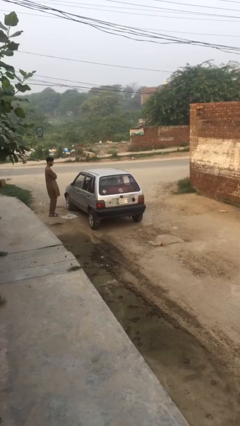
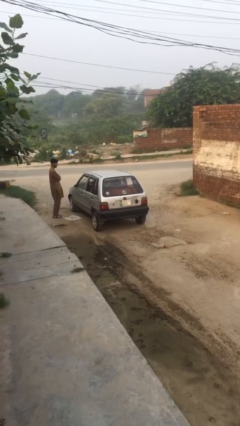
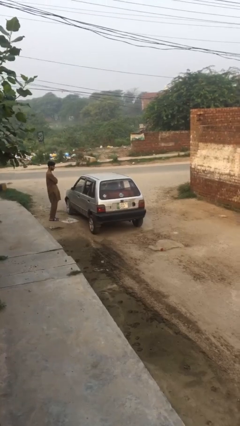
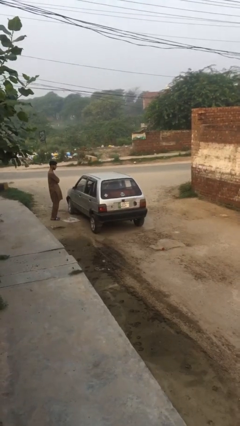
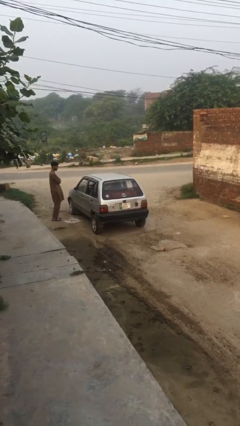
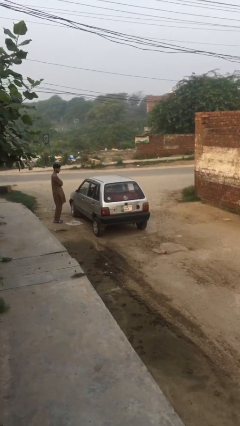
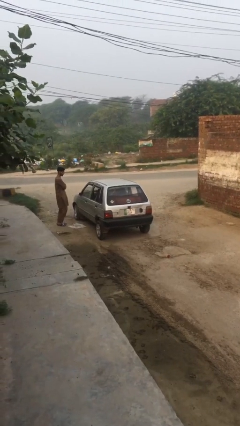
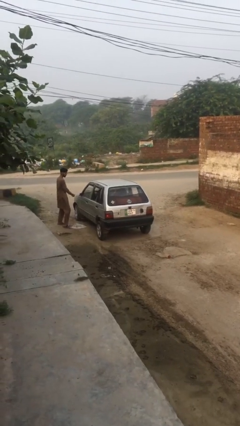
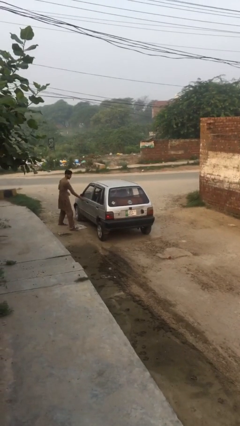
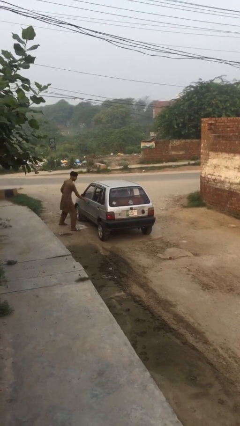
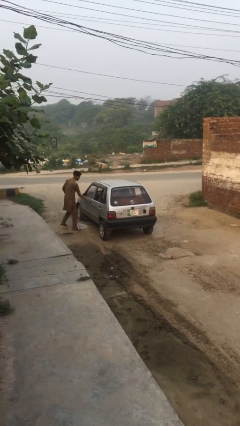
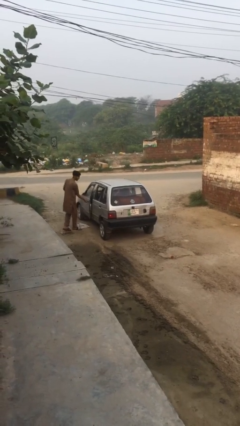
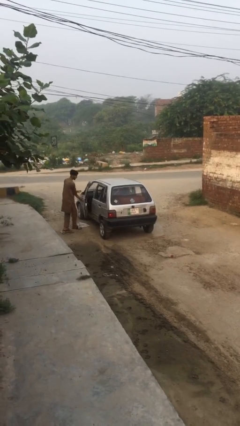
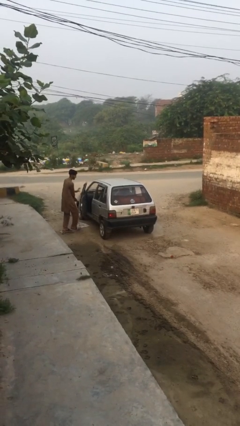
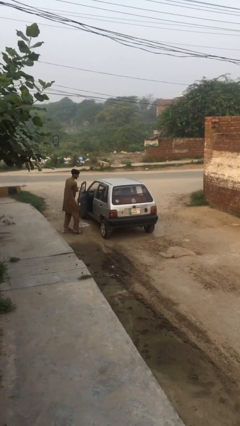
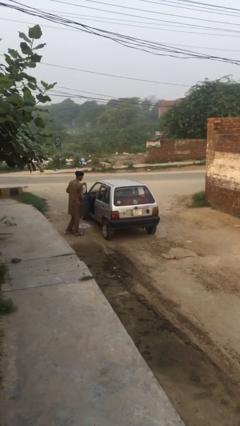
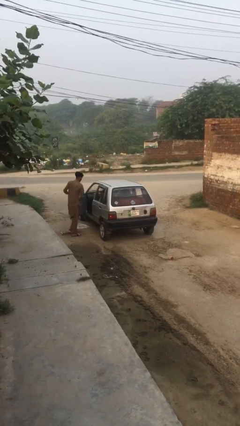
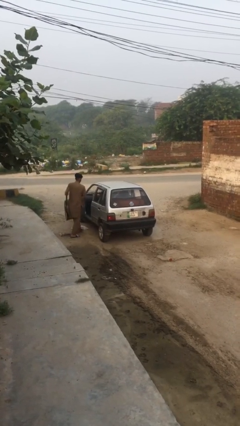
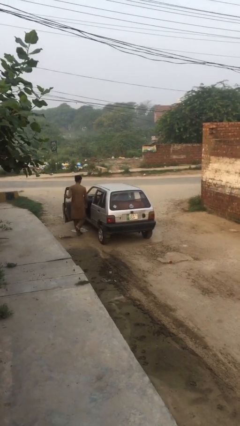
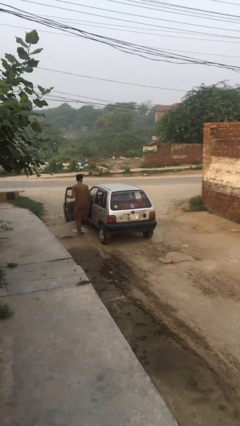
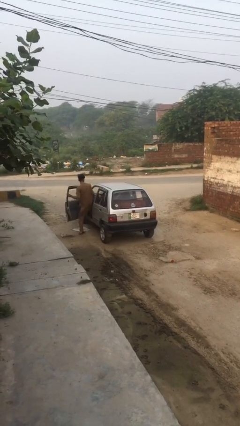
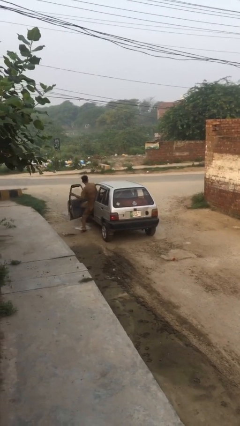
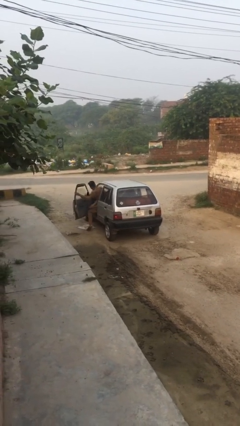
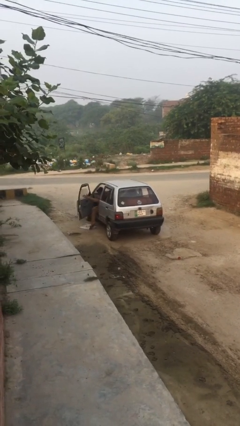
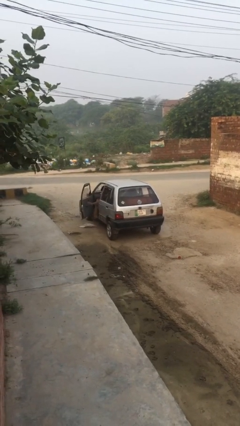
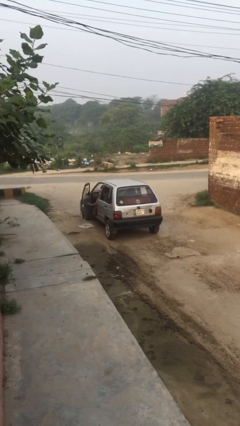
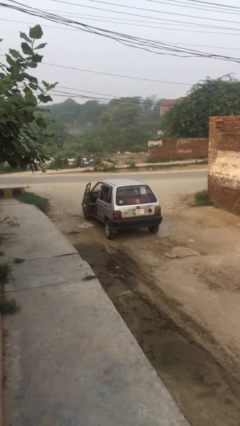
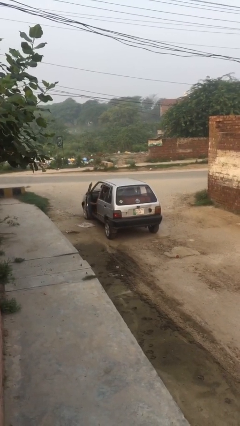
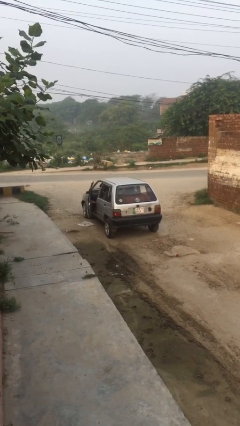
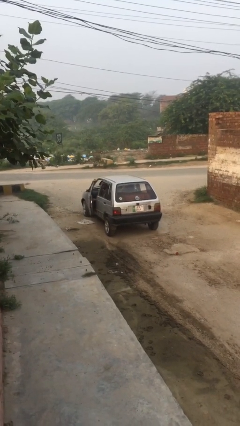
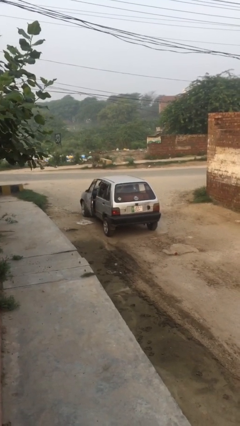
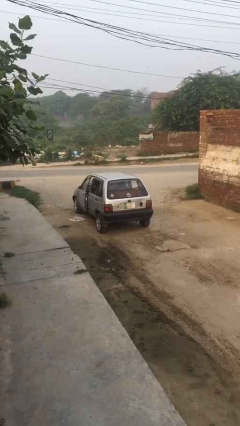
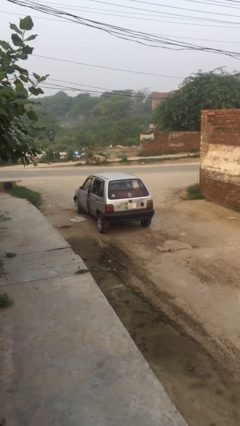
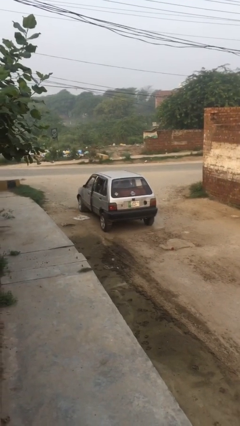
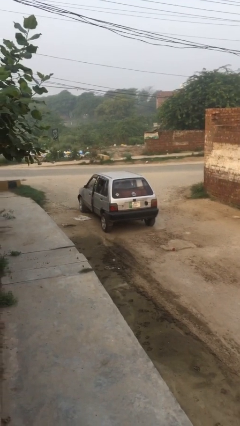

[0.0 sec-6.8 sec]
car picks up person

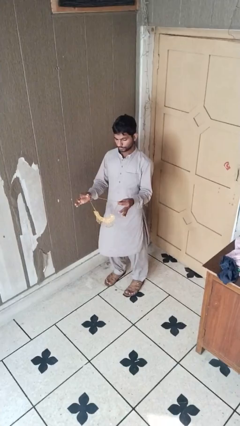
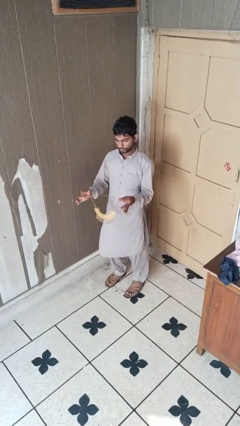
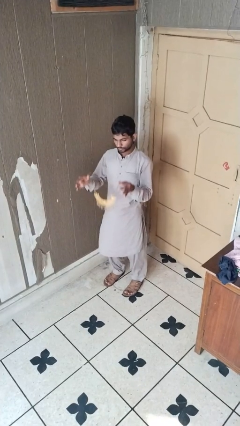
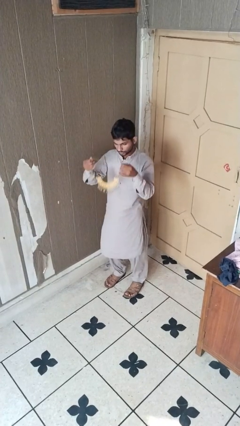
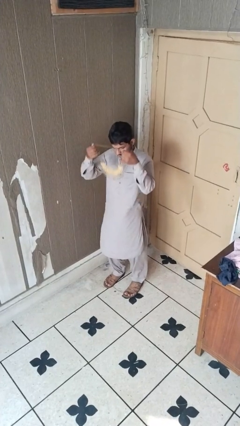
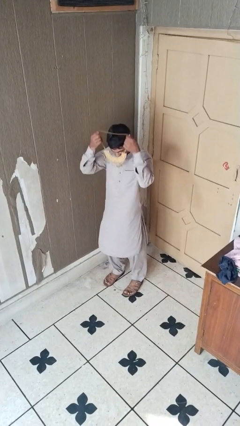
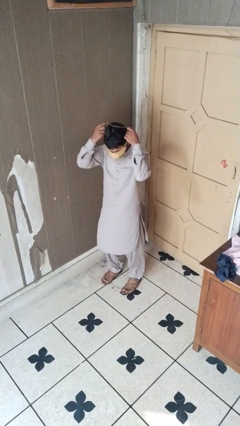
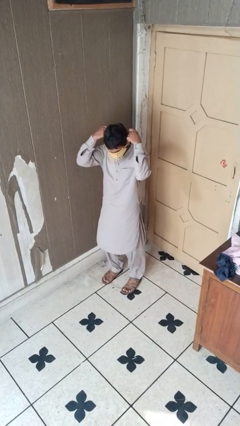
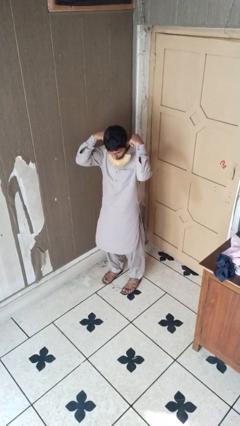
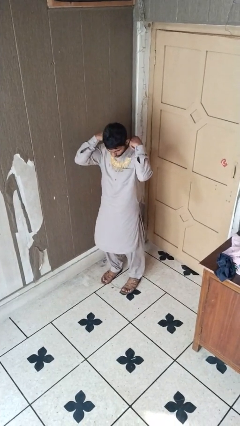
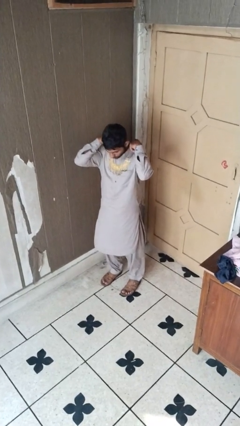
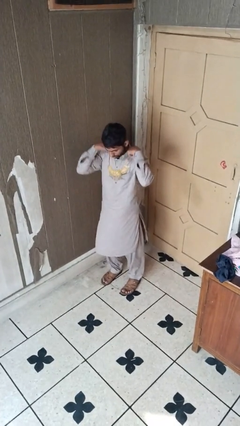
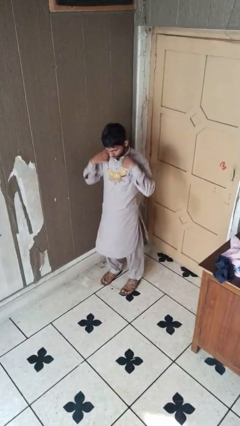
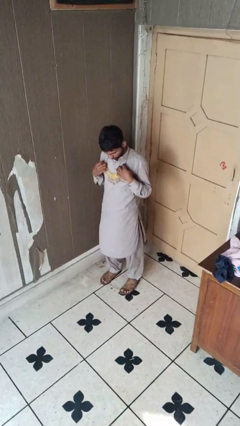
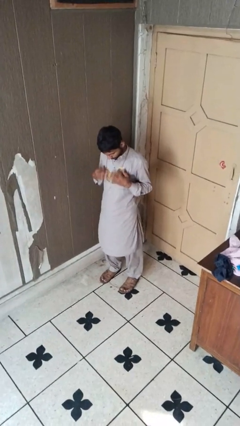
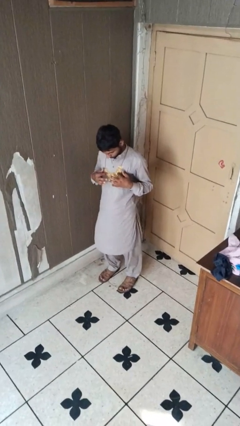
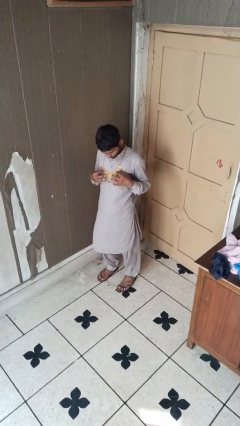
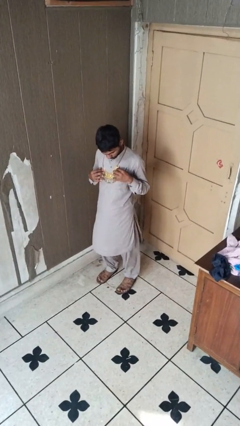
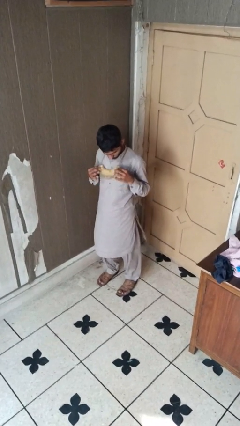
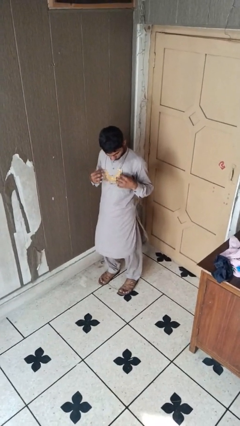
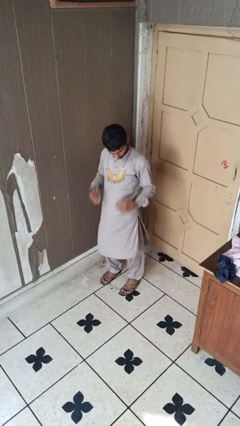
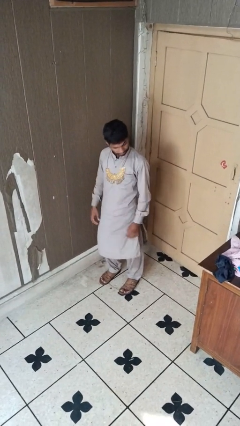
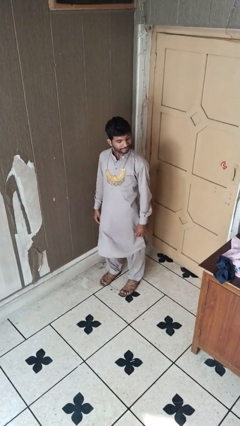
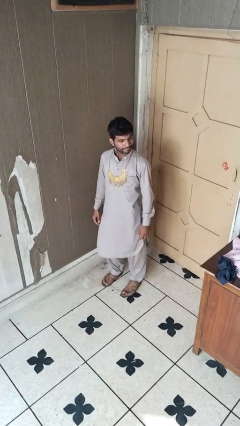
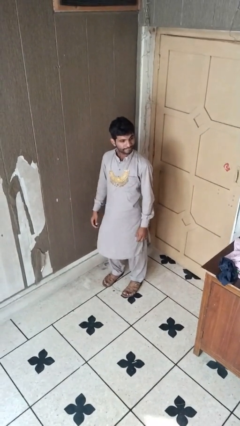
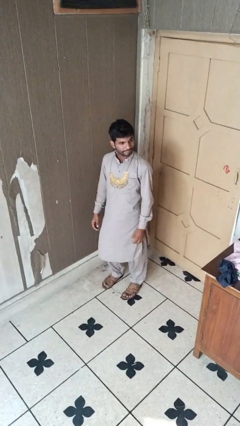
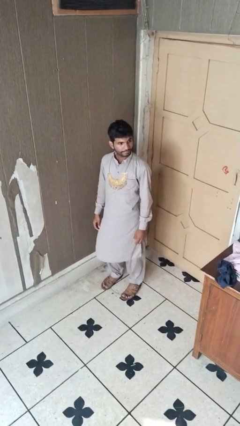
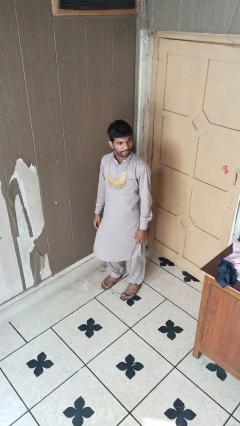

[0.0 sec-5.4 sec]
person puts on necklace

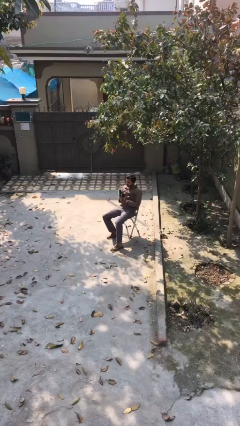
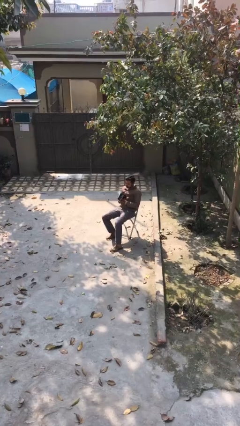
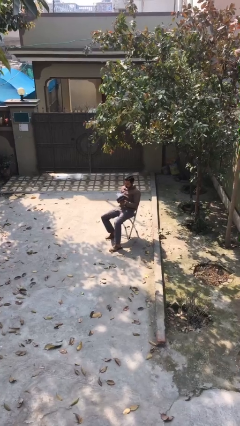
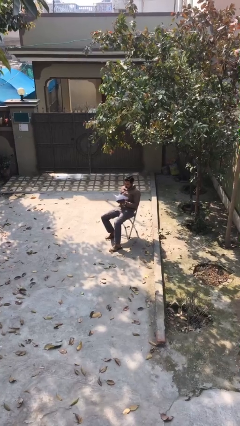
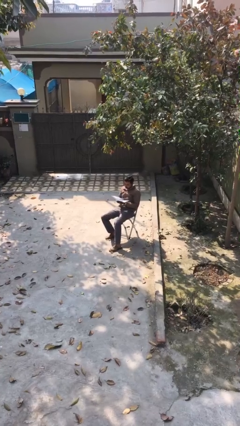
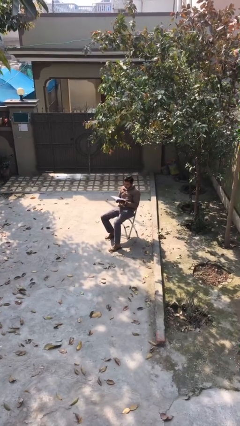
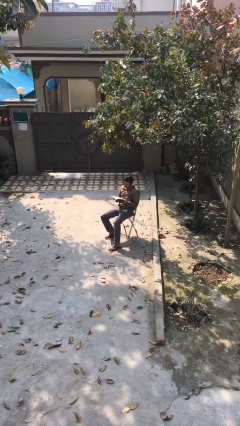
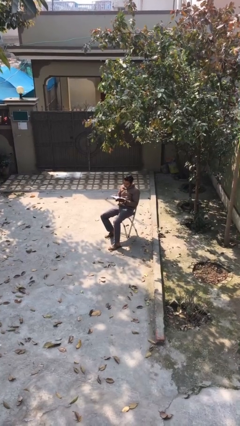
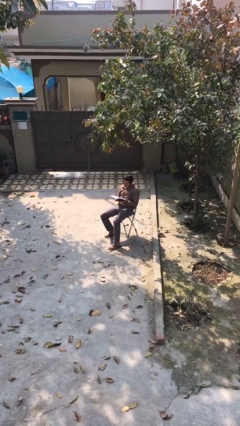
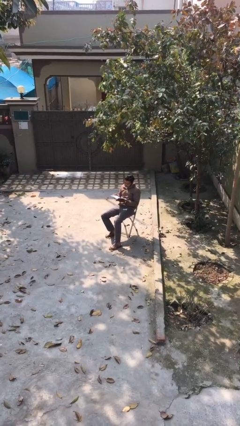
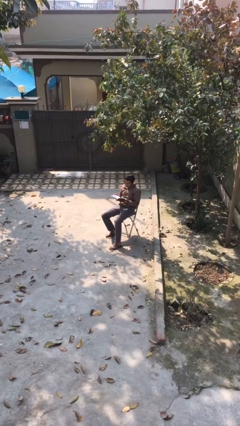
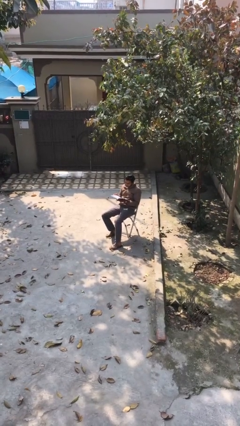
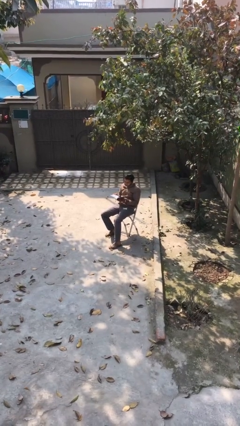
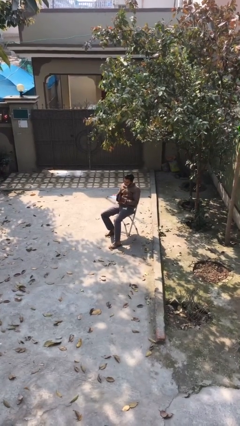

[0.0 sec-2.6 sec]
person reads document

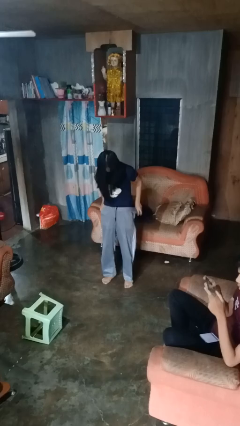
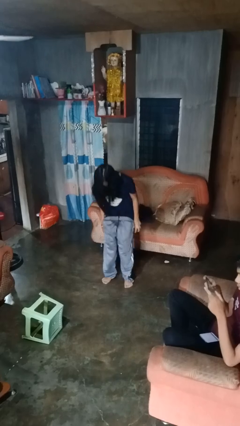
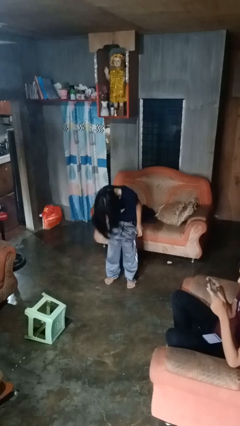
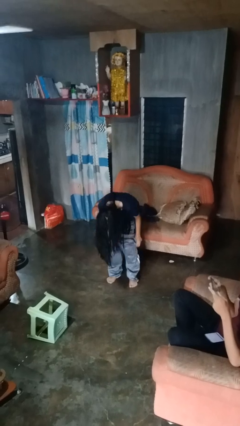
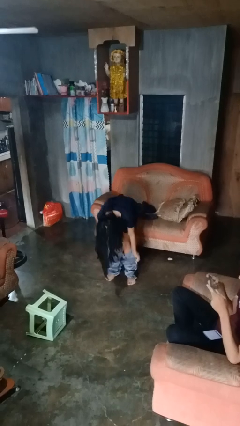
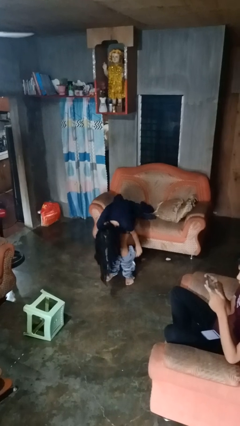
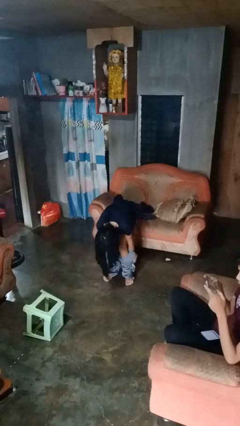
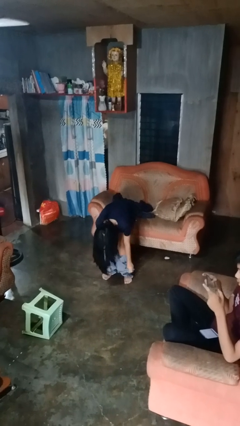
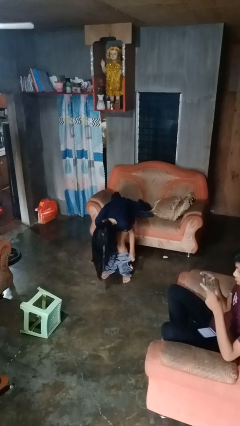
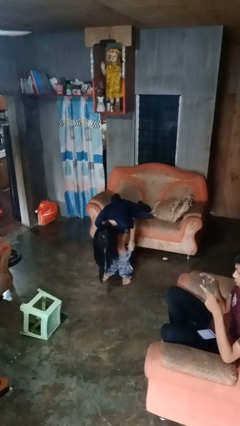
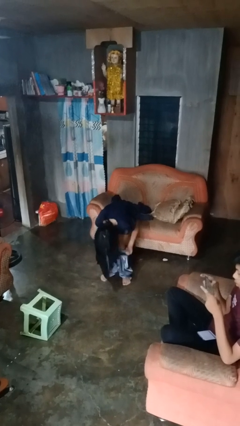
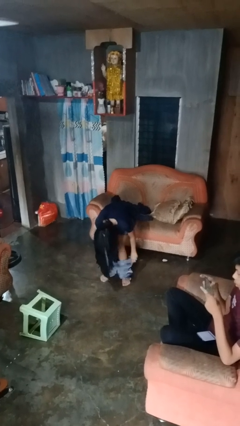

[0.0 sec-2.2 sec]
person takes off pants

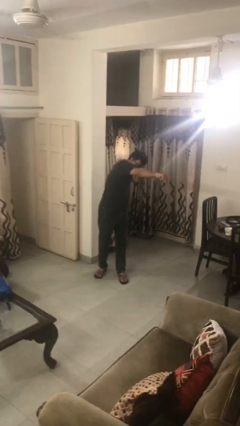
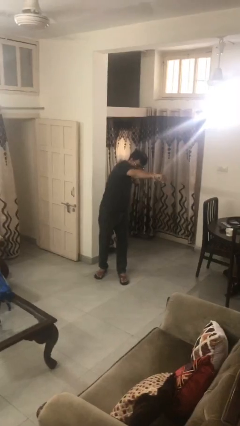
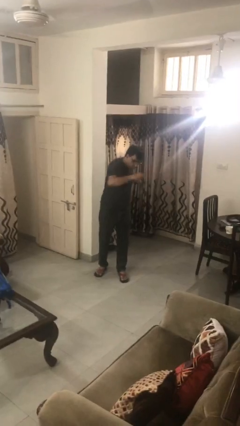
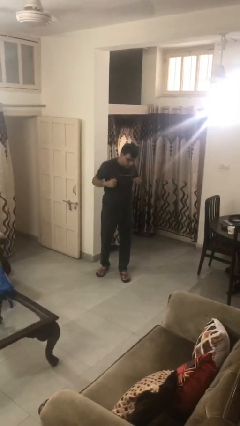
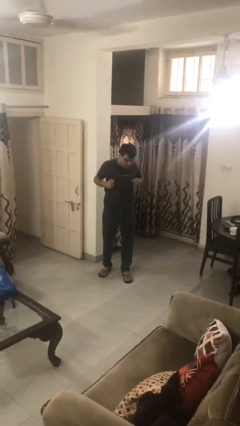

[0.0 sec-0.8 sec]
person punches
